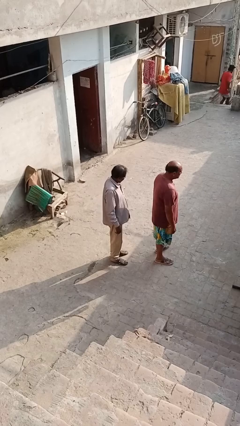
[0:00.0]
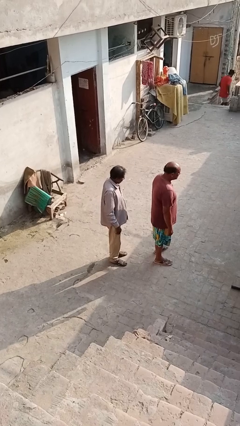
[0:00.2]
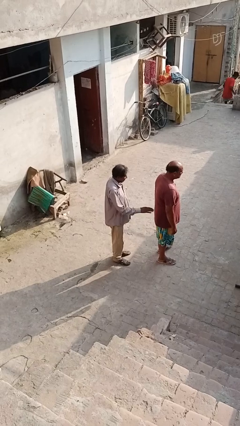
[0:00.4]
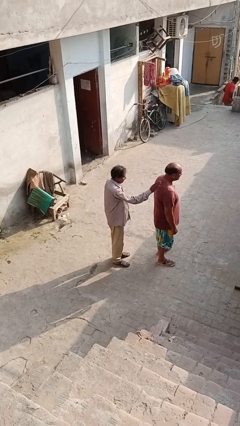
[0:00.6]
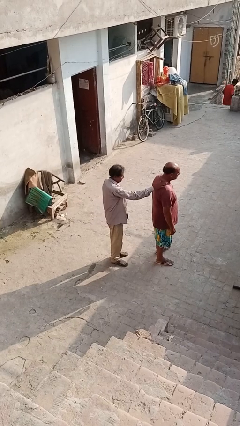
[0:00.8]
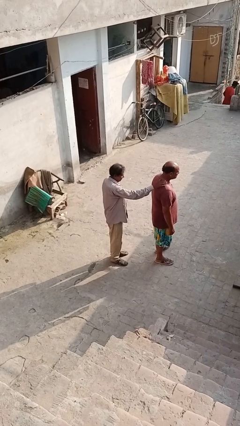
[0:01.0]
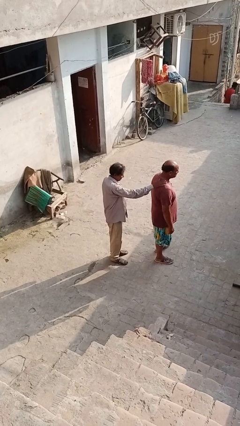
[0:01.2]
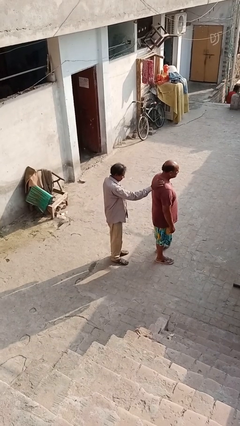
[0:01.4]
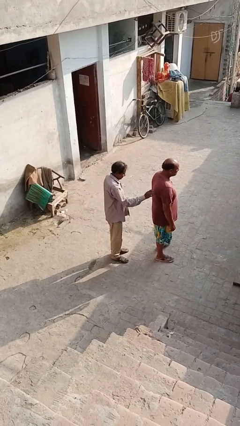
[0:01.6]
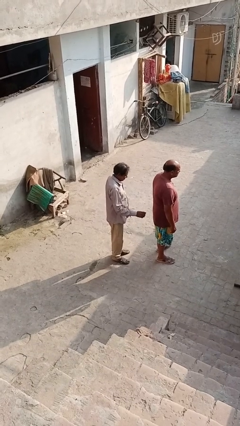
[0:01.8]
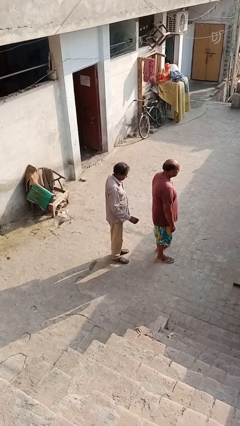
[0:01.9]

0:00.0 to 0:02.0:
person touches back of person

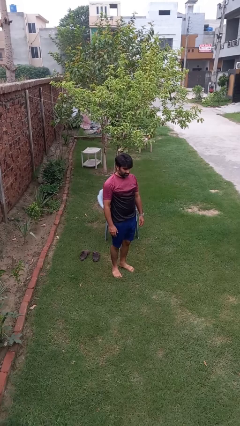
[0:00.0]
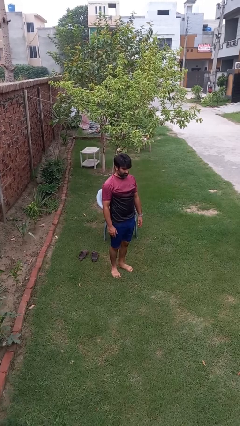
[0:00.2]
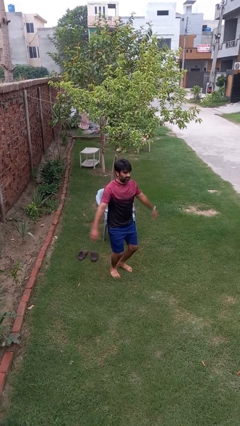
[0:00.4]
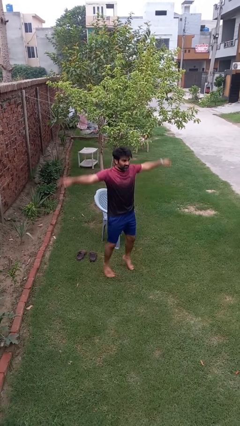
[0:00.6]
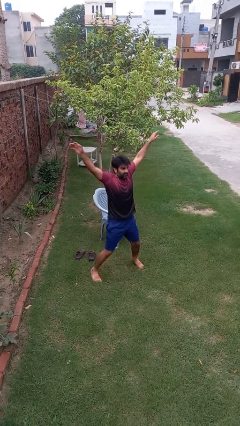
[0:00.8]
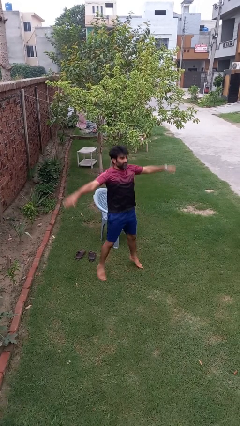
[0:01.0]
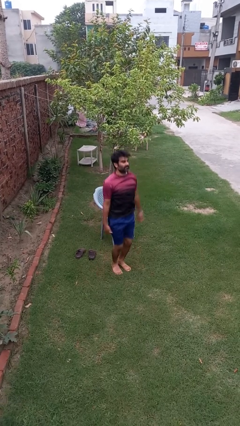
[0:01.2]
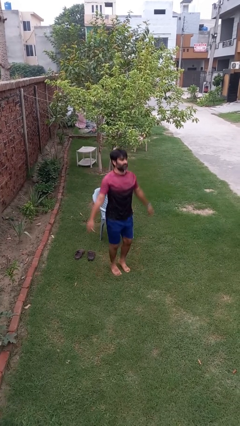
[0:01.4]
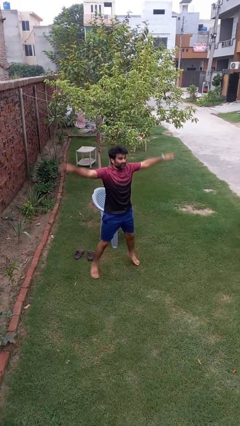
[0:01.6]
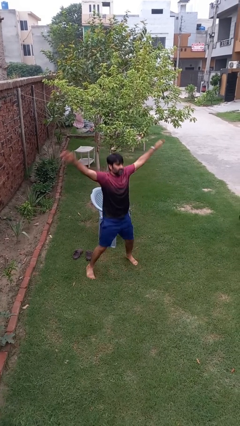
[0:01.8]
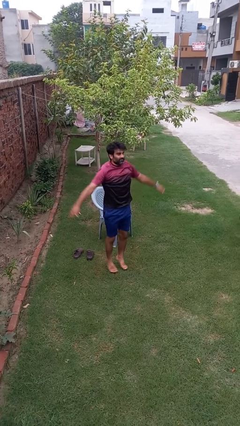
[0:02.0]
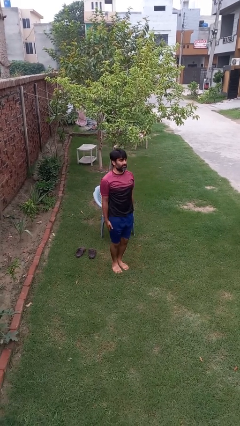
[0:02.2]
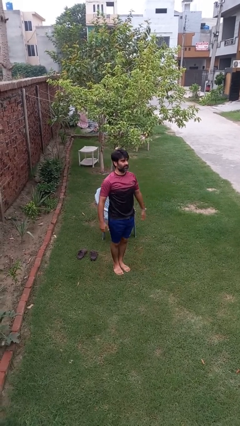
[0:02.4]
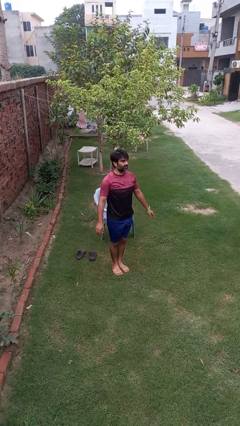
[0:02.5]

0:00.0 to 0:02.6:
person exercises with jumping jacks

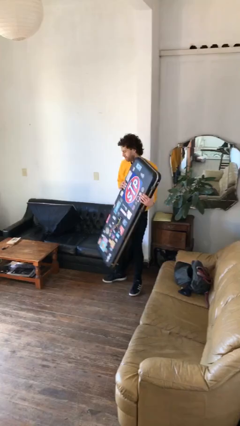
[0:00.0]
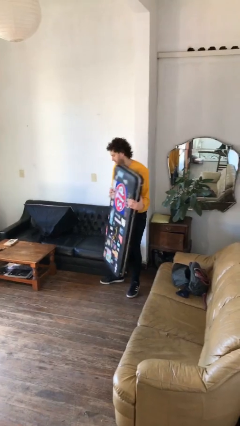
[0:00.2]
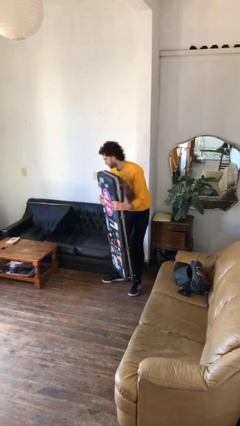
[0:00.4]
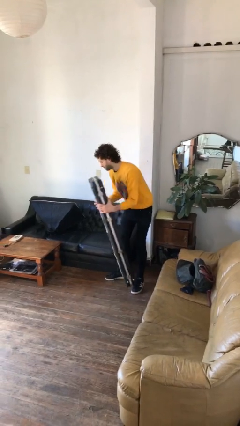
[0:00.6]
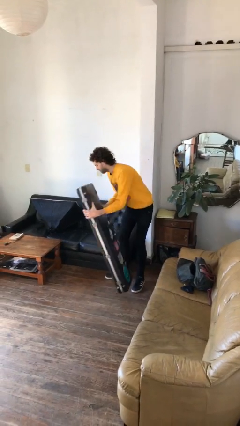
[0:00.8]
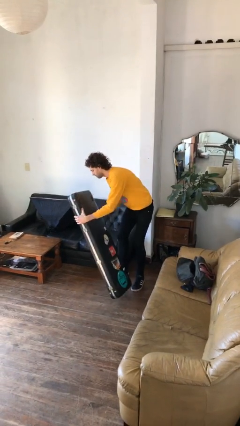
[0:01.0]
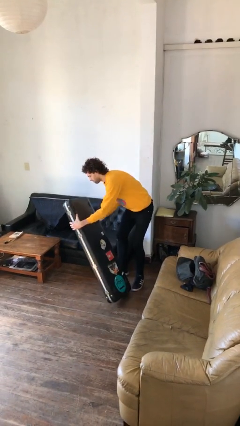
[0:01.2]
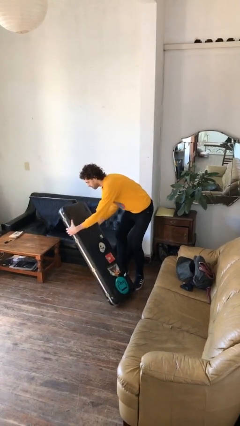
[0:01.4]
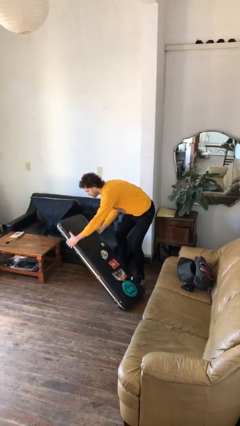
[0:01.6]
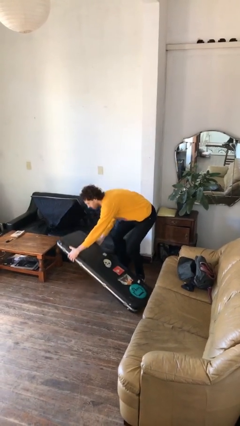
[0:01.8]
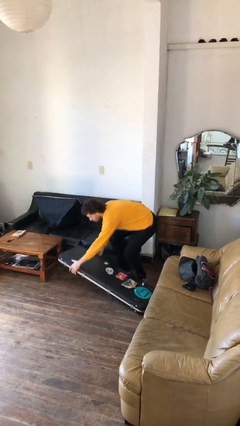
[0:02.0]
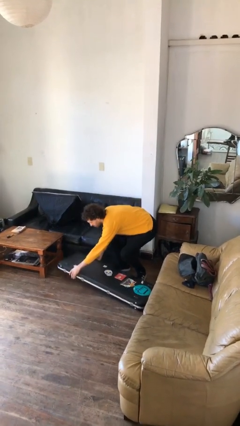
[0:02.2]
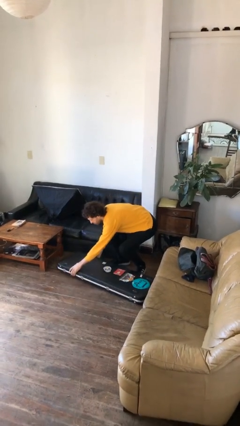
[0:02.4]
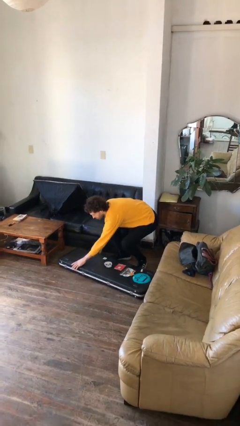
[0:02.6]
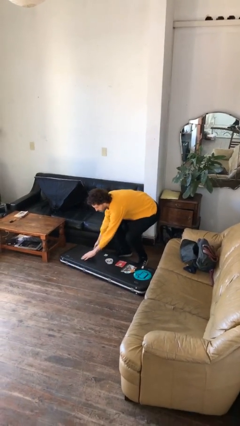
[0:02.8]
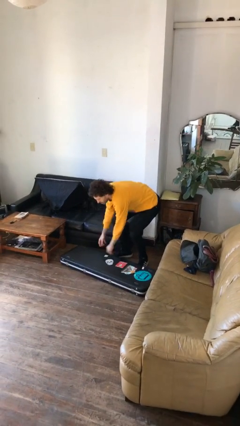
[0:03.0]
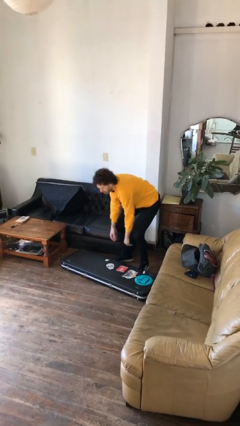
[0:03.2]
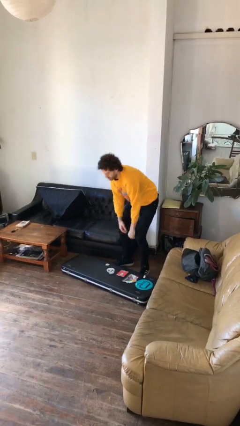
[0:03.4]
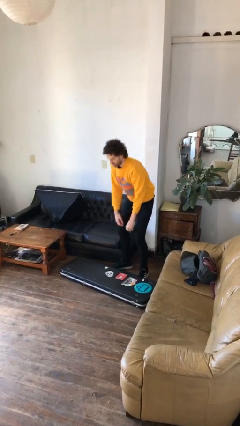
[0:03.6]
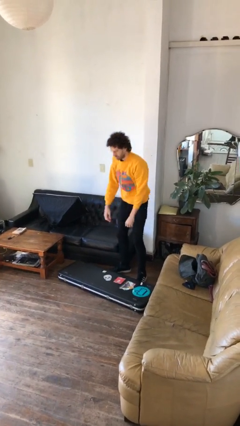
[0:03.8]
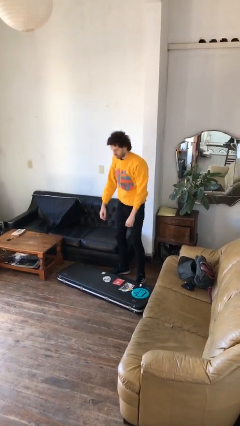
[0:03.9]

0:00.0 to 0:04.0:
person puts down object on floor

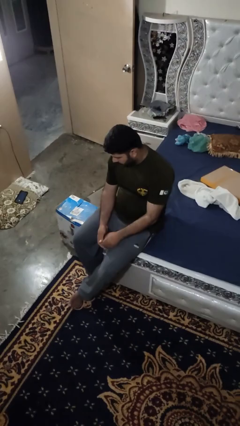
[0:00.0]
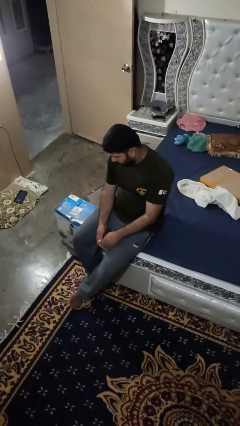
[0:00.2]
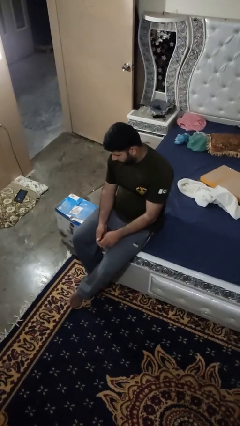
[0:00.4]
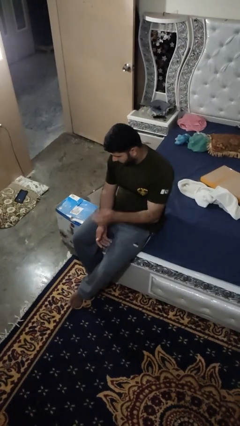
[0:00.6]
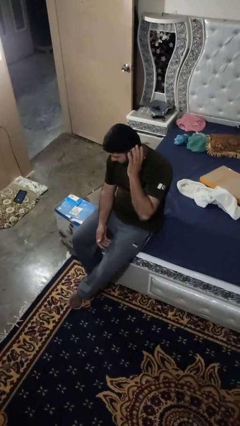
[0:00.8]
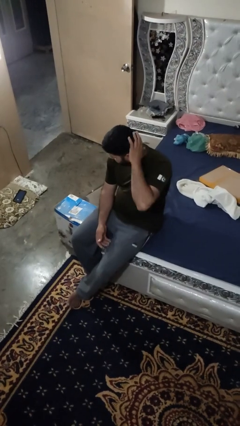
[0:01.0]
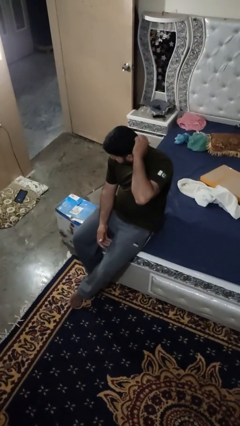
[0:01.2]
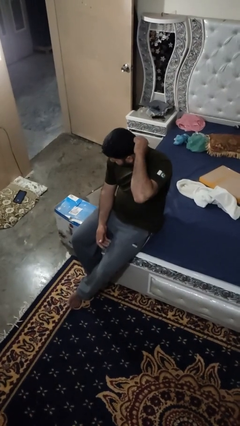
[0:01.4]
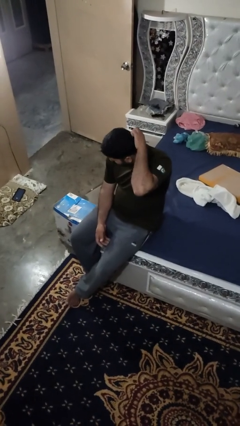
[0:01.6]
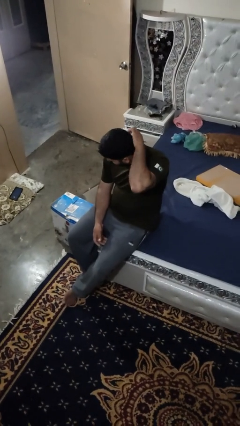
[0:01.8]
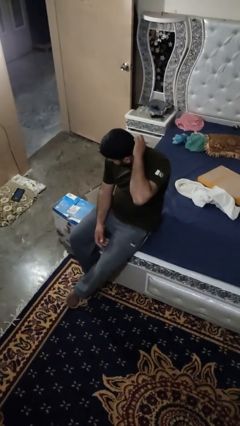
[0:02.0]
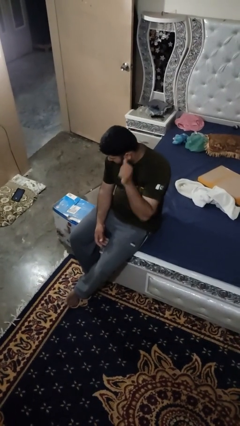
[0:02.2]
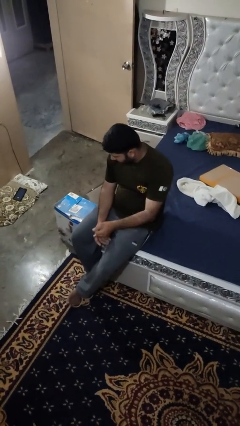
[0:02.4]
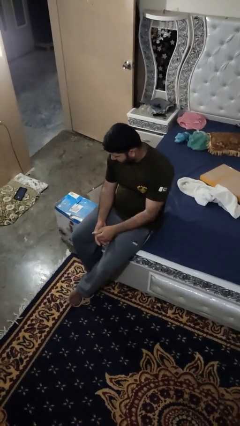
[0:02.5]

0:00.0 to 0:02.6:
person strokes hair

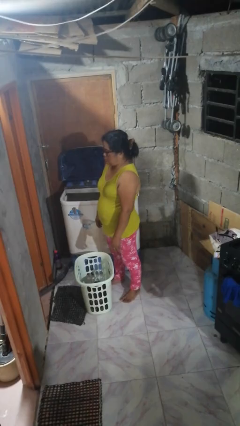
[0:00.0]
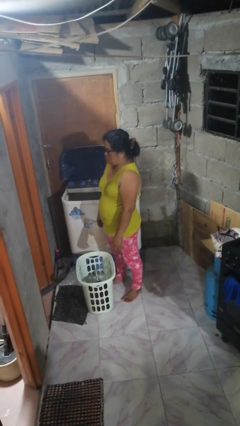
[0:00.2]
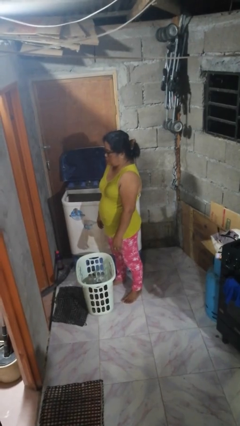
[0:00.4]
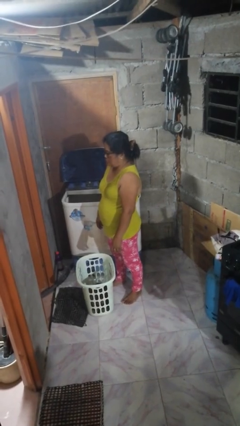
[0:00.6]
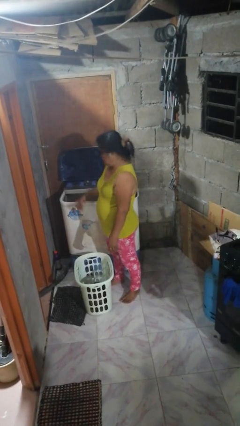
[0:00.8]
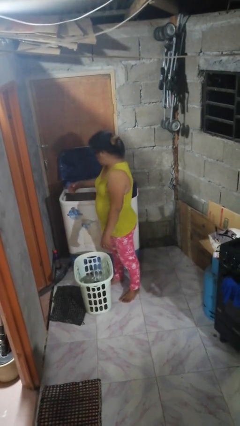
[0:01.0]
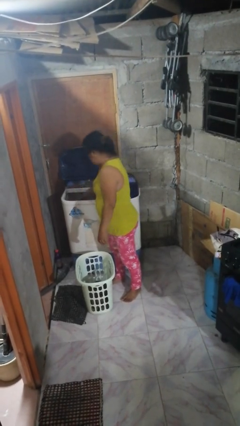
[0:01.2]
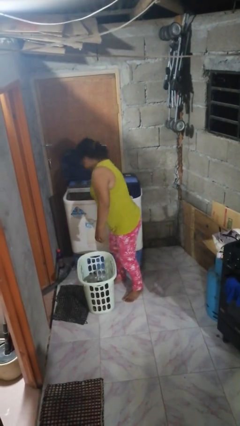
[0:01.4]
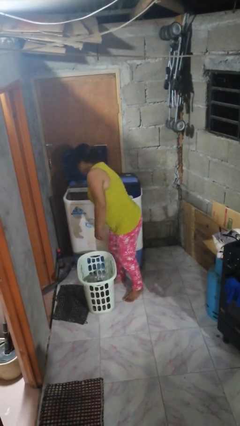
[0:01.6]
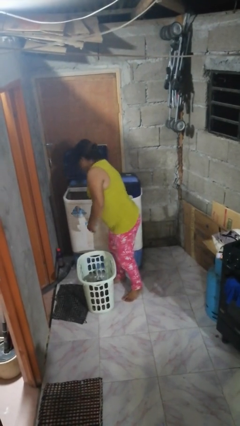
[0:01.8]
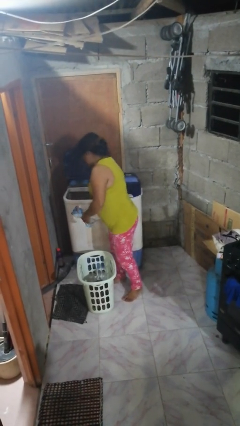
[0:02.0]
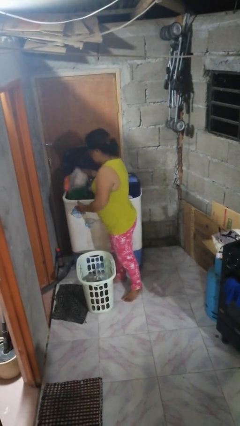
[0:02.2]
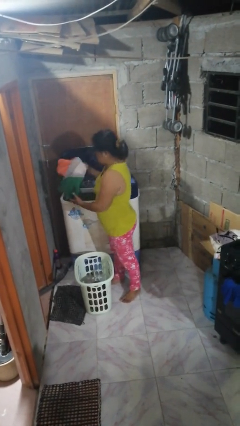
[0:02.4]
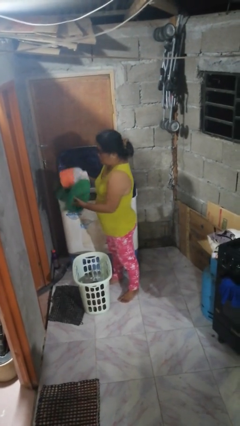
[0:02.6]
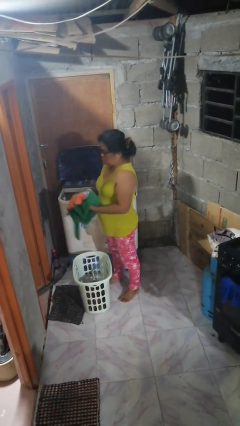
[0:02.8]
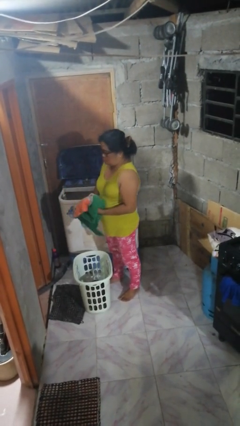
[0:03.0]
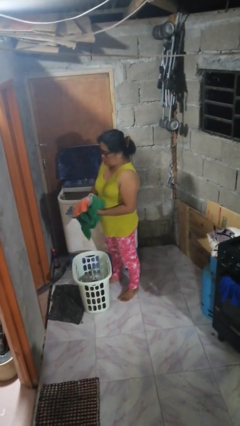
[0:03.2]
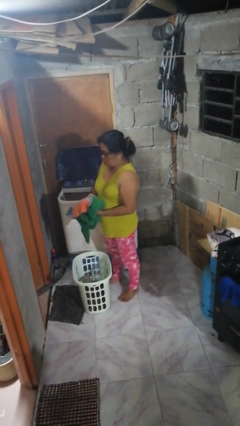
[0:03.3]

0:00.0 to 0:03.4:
person unloads clotheswasher

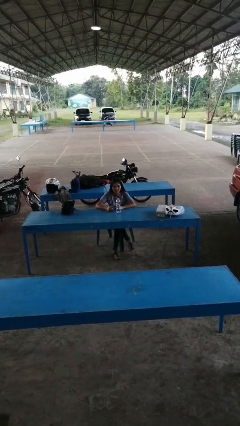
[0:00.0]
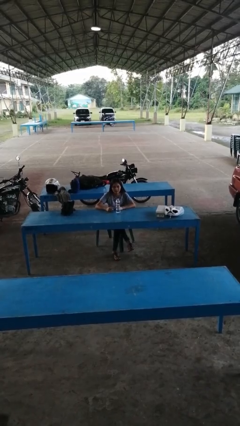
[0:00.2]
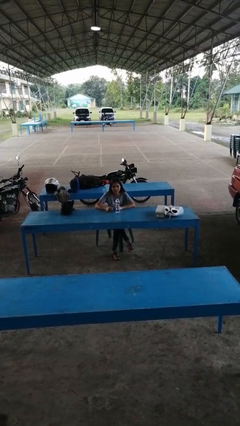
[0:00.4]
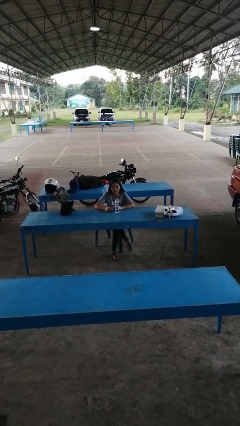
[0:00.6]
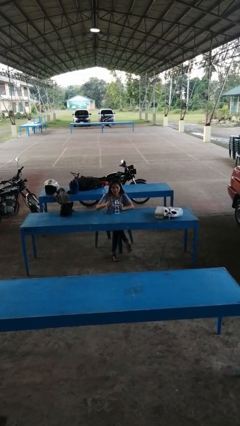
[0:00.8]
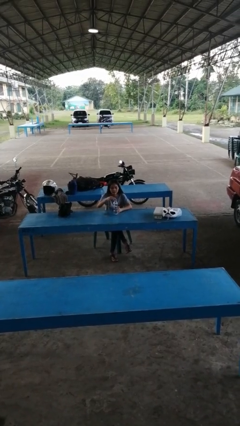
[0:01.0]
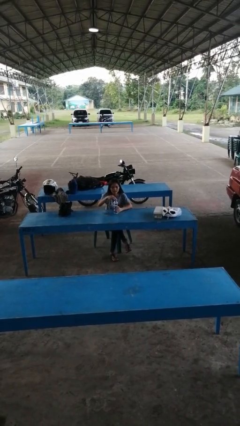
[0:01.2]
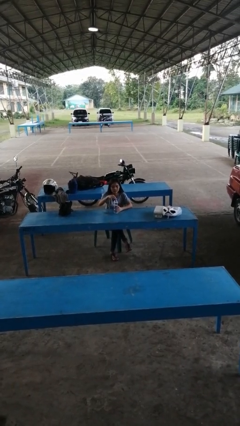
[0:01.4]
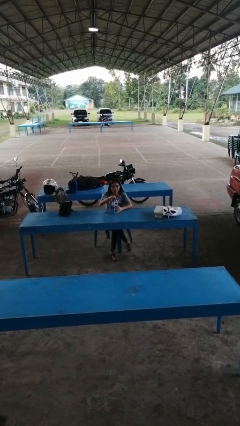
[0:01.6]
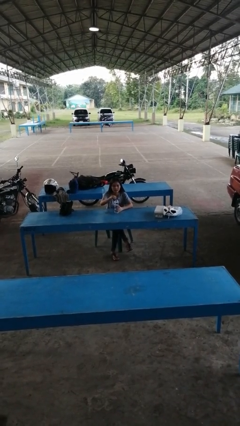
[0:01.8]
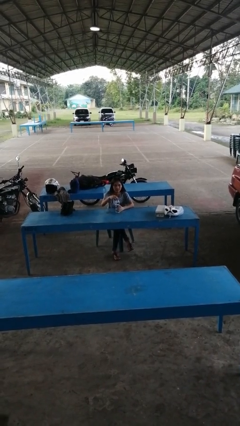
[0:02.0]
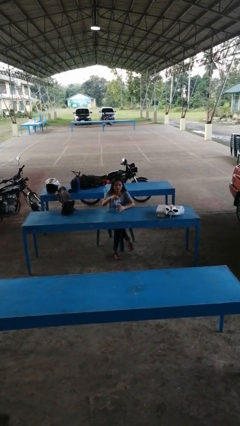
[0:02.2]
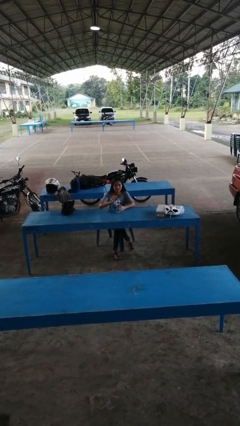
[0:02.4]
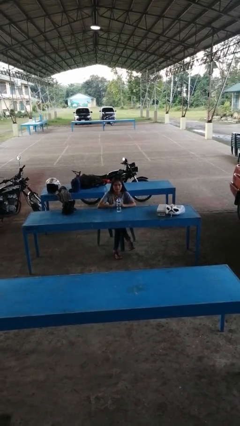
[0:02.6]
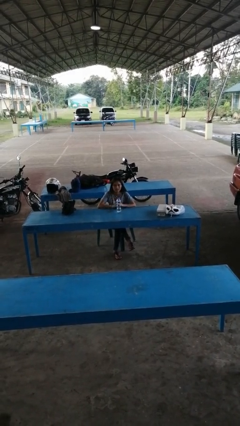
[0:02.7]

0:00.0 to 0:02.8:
person screws lid to bottle
